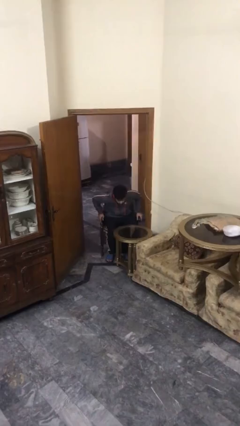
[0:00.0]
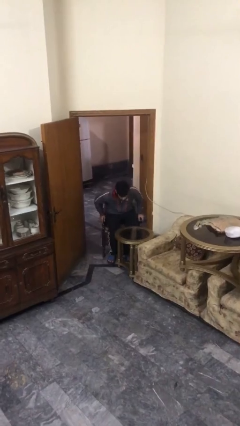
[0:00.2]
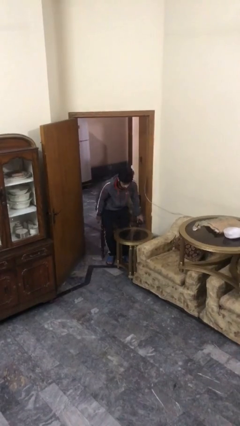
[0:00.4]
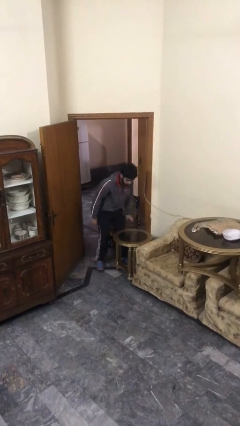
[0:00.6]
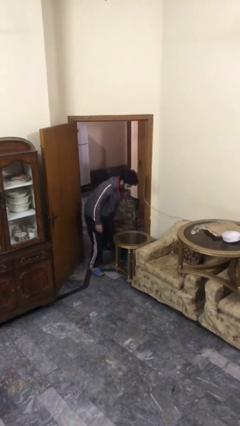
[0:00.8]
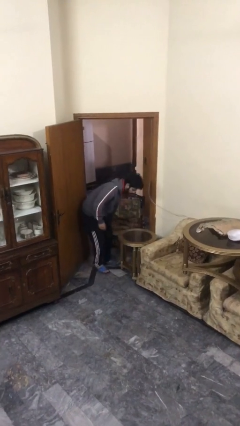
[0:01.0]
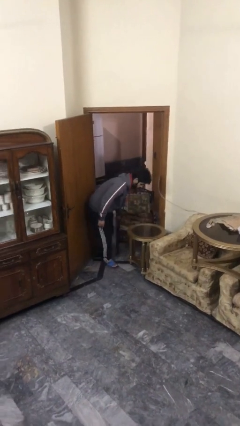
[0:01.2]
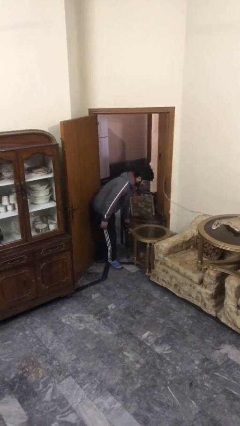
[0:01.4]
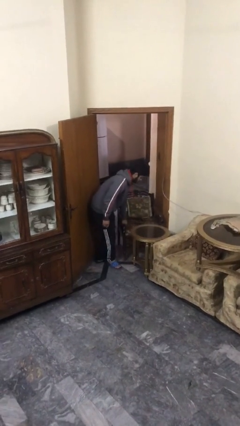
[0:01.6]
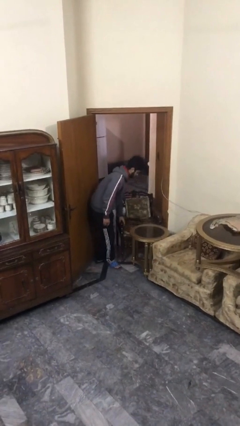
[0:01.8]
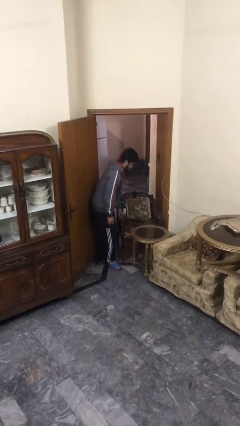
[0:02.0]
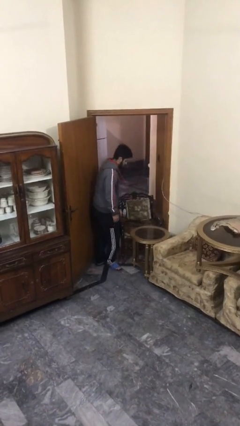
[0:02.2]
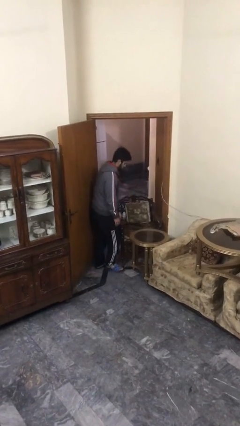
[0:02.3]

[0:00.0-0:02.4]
person stands up

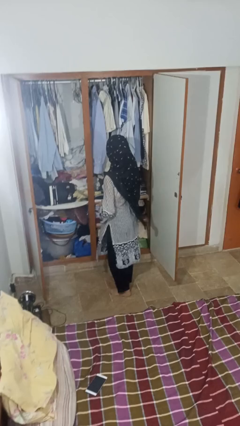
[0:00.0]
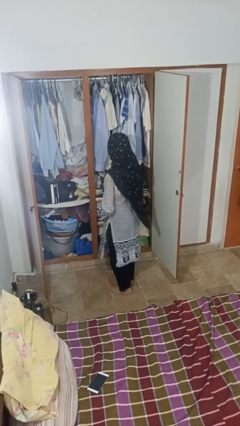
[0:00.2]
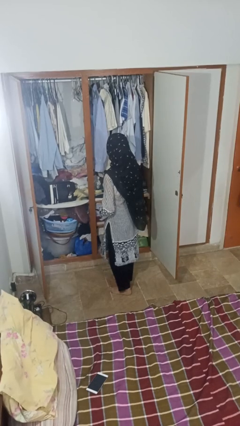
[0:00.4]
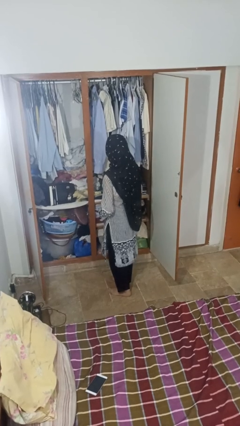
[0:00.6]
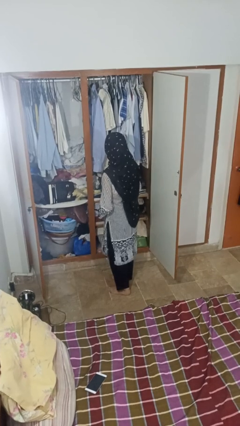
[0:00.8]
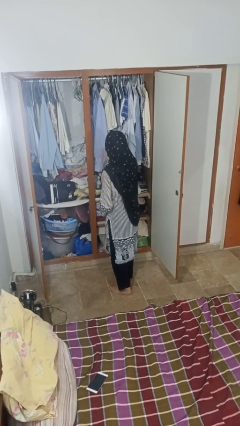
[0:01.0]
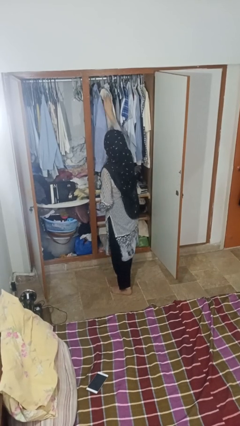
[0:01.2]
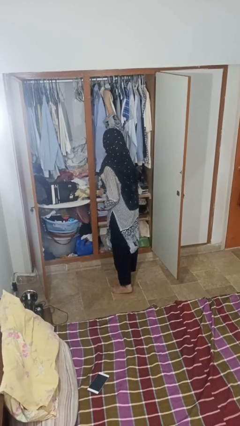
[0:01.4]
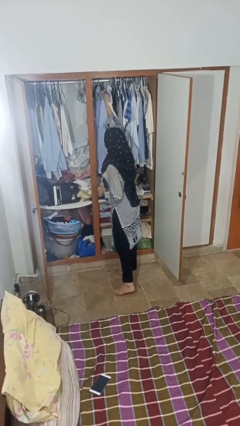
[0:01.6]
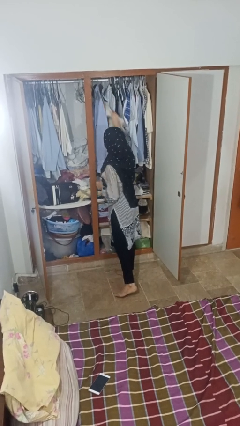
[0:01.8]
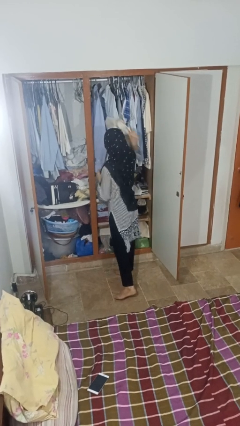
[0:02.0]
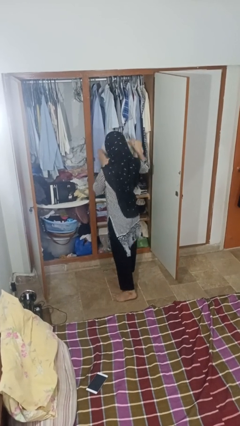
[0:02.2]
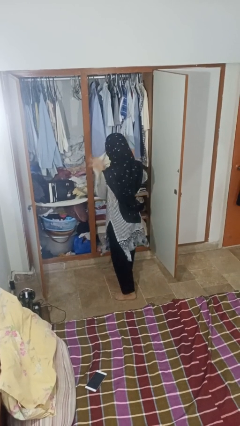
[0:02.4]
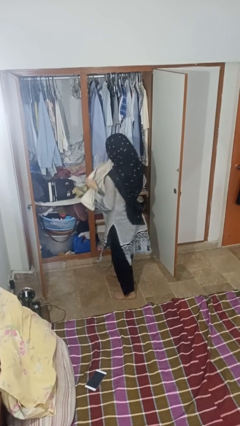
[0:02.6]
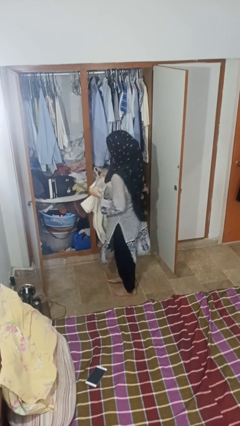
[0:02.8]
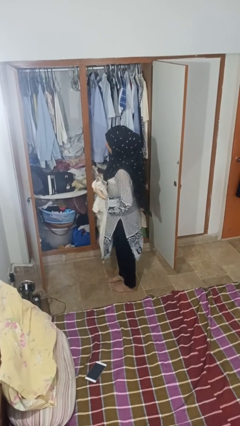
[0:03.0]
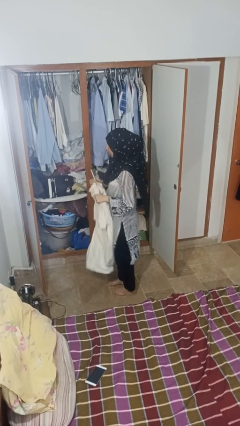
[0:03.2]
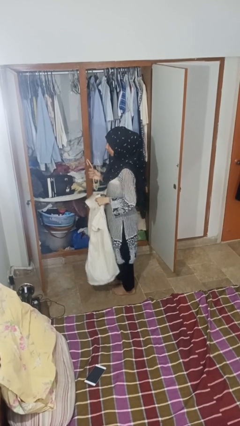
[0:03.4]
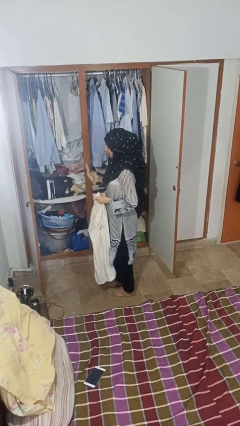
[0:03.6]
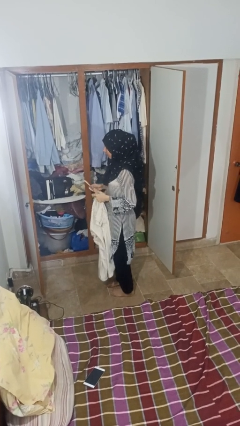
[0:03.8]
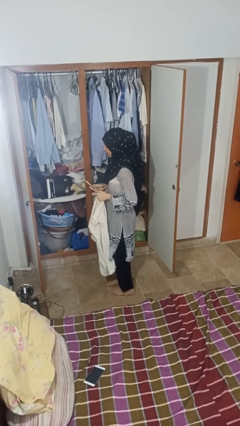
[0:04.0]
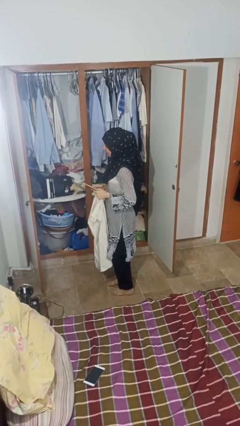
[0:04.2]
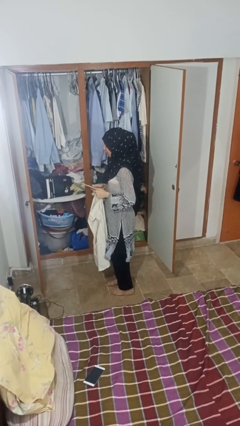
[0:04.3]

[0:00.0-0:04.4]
person takes clothes from closet

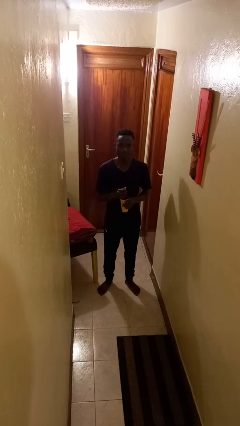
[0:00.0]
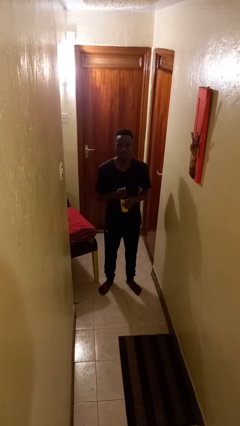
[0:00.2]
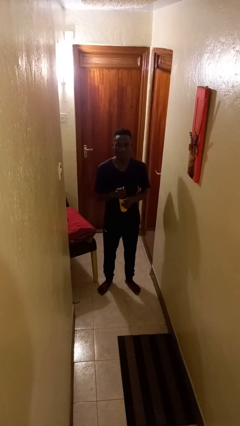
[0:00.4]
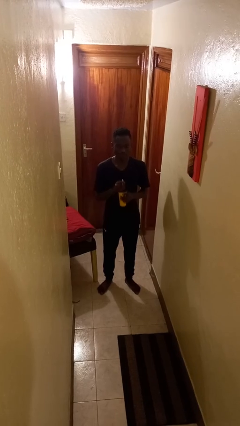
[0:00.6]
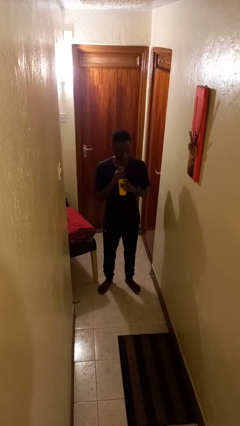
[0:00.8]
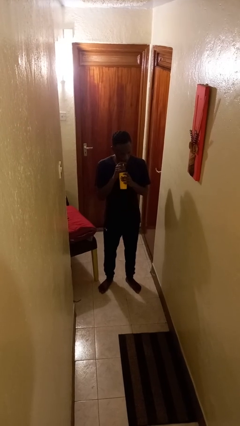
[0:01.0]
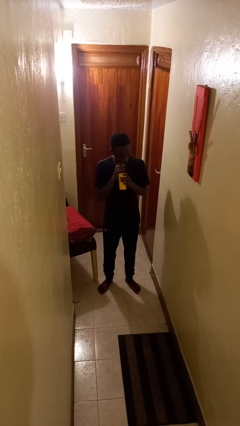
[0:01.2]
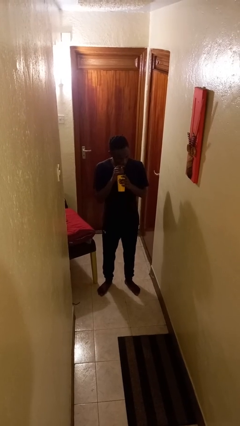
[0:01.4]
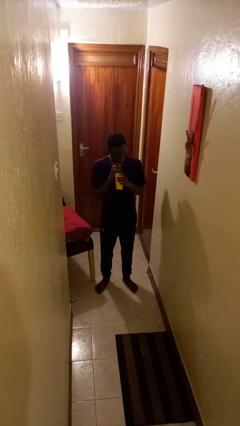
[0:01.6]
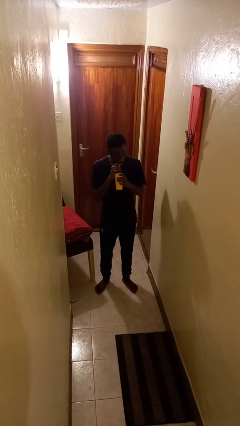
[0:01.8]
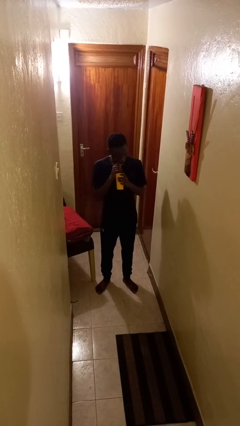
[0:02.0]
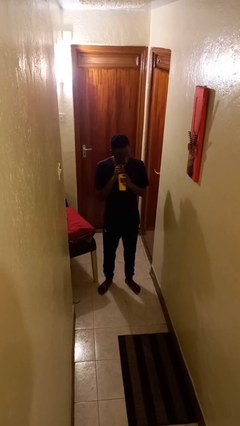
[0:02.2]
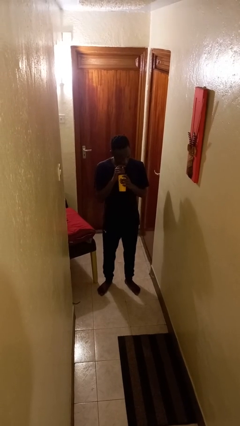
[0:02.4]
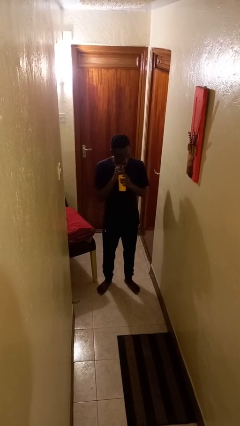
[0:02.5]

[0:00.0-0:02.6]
person drinks from straw

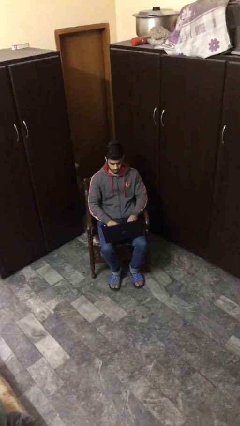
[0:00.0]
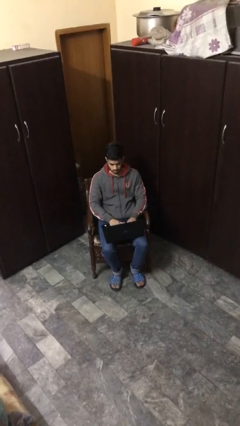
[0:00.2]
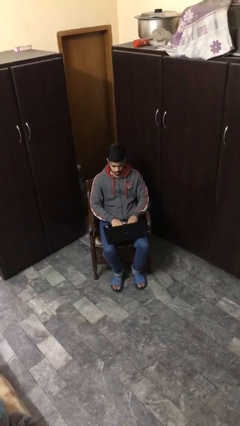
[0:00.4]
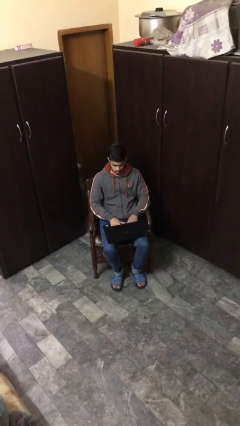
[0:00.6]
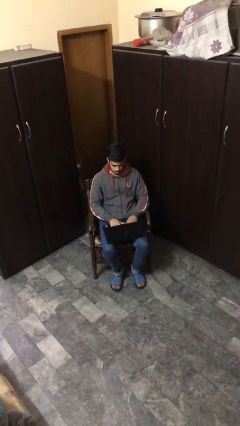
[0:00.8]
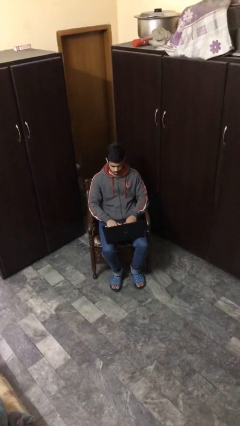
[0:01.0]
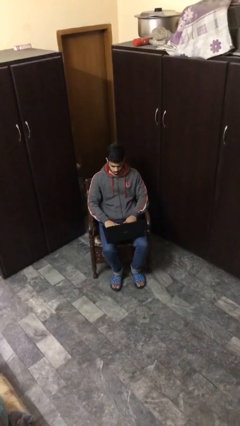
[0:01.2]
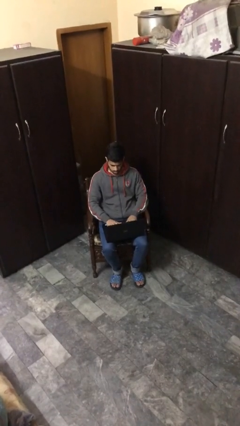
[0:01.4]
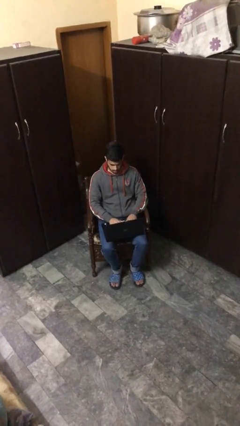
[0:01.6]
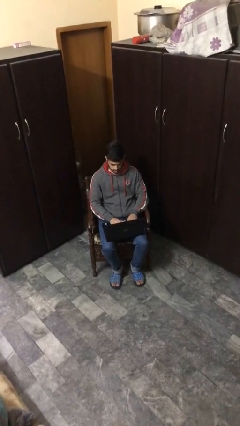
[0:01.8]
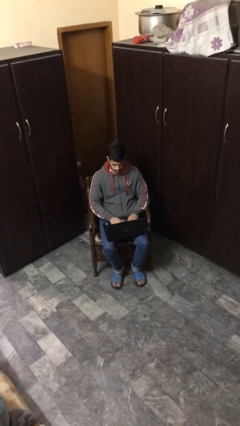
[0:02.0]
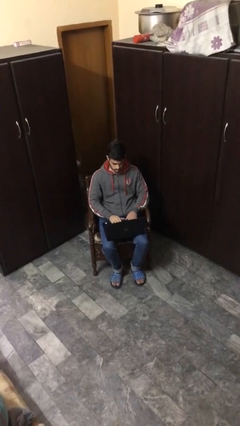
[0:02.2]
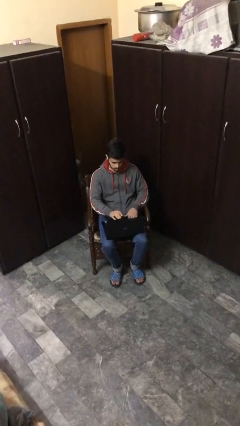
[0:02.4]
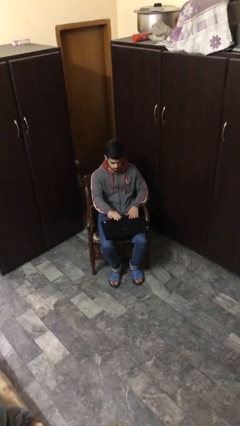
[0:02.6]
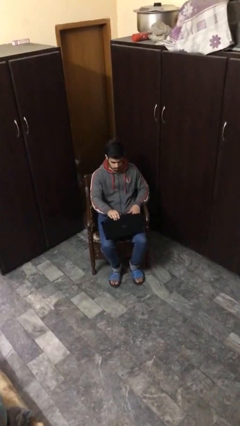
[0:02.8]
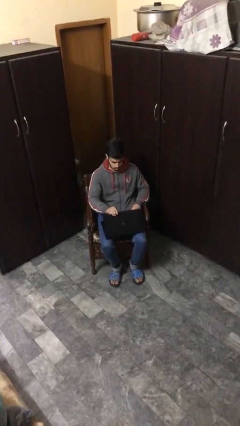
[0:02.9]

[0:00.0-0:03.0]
person interacts with laptop

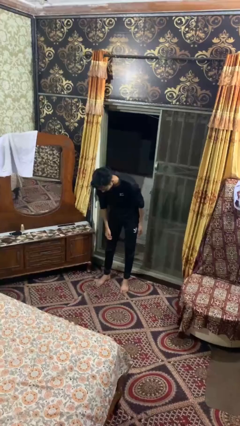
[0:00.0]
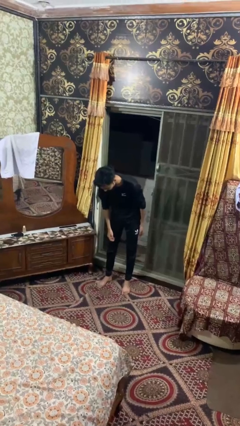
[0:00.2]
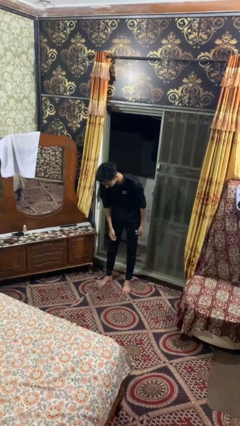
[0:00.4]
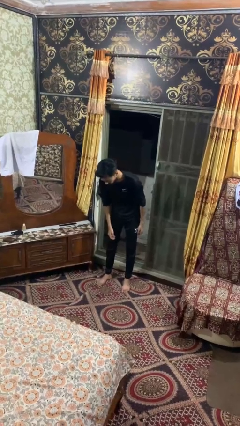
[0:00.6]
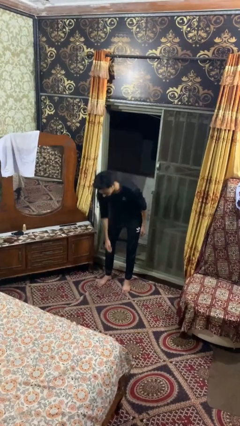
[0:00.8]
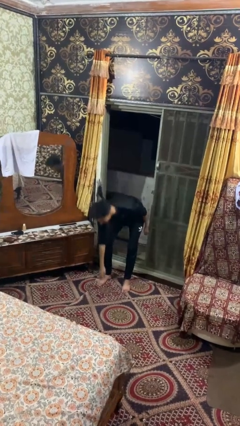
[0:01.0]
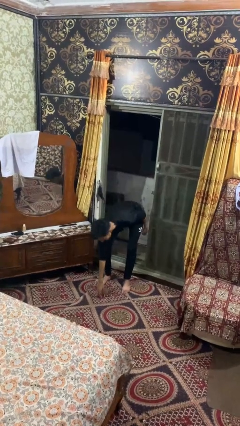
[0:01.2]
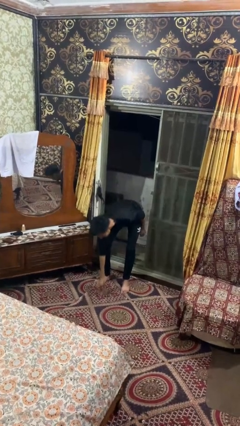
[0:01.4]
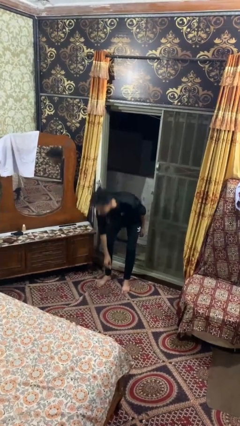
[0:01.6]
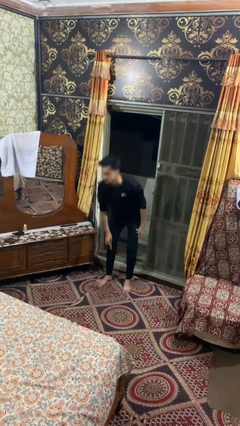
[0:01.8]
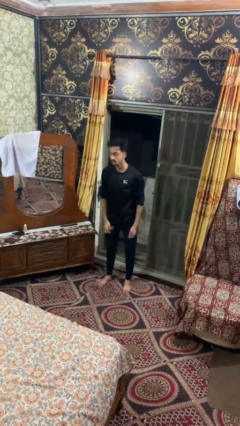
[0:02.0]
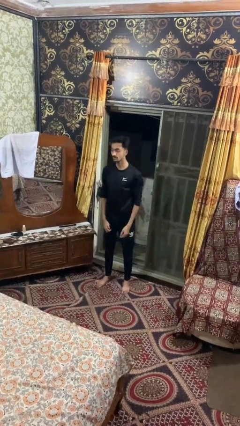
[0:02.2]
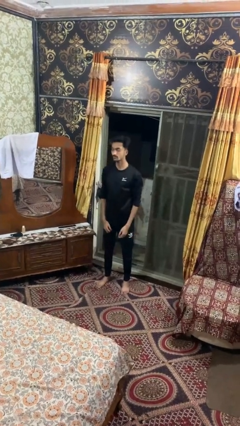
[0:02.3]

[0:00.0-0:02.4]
person picks up object from floor

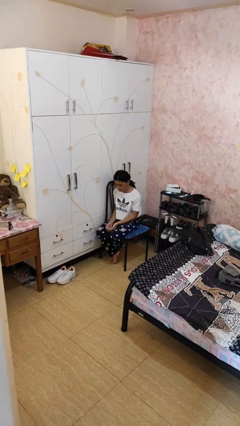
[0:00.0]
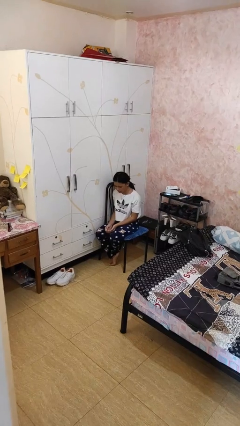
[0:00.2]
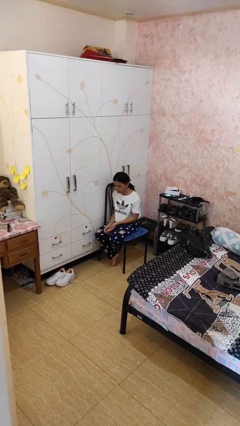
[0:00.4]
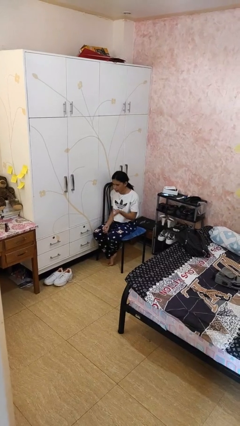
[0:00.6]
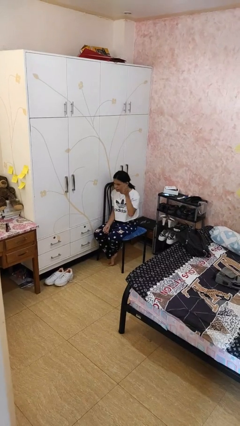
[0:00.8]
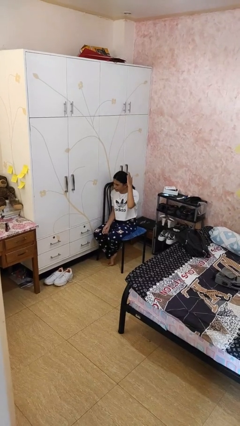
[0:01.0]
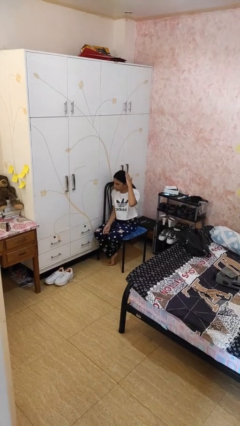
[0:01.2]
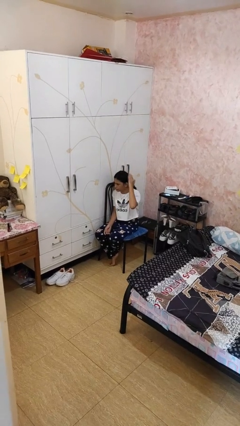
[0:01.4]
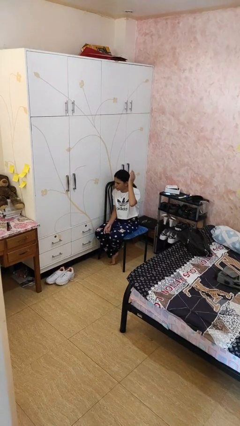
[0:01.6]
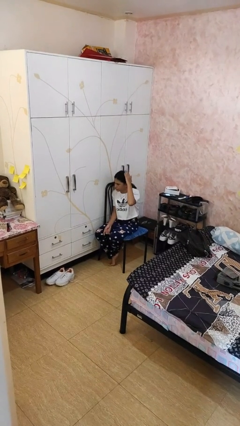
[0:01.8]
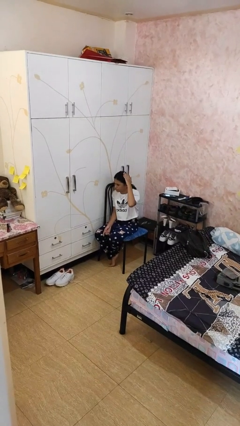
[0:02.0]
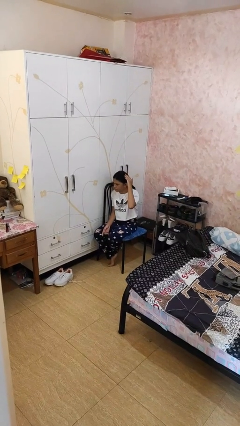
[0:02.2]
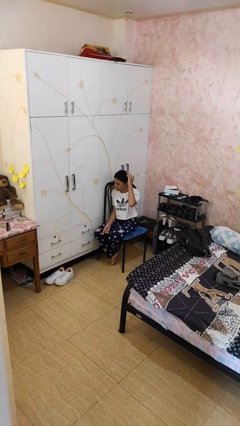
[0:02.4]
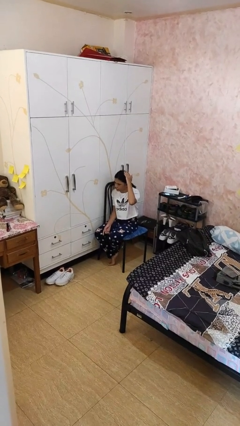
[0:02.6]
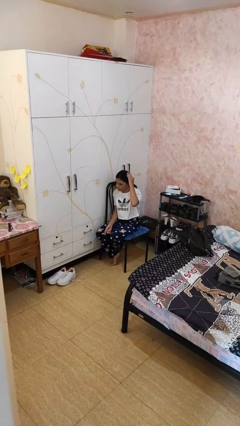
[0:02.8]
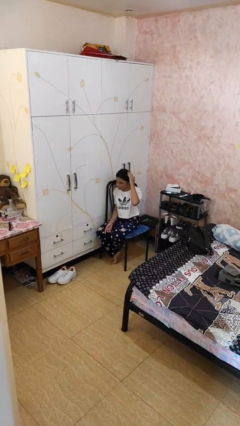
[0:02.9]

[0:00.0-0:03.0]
person pats head
